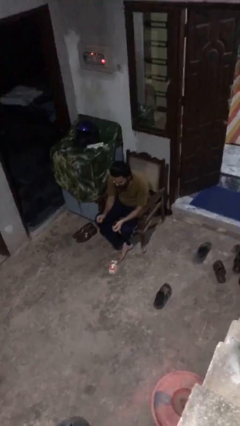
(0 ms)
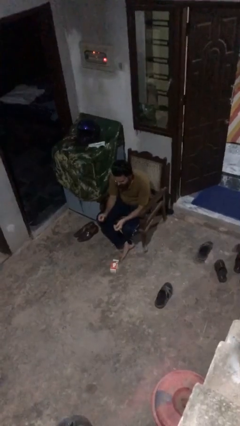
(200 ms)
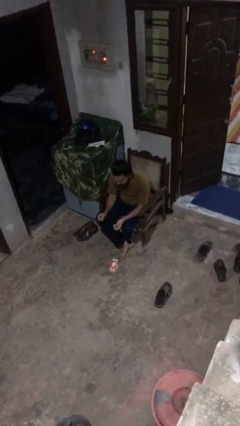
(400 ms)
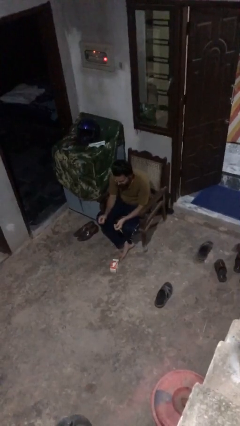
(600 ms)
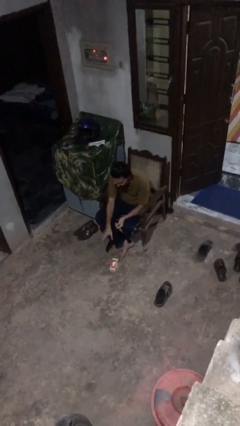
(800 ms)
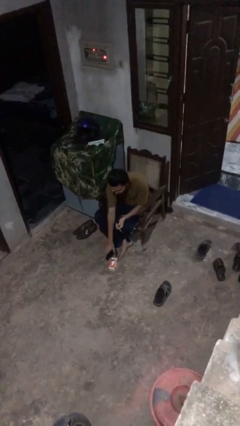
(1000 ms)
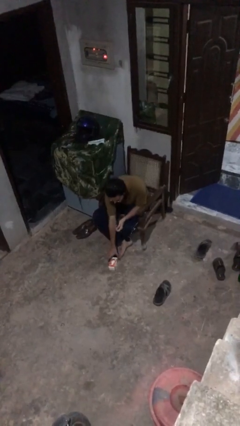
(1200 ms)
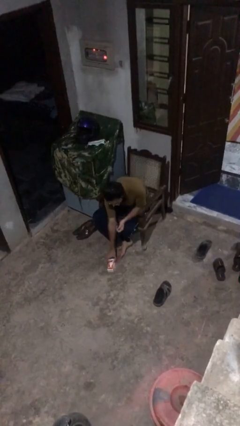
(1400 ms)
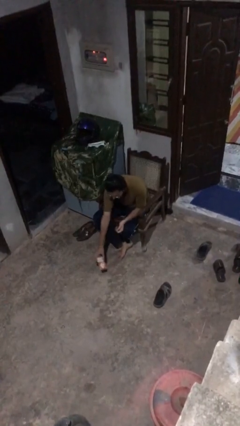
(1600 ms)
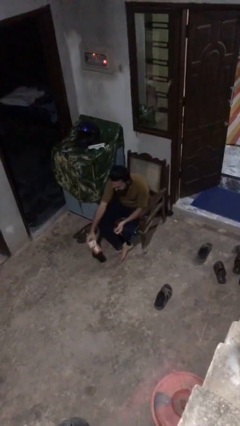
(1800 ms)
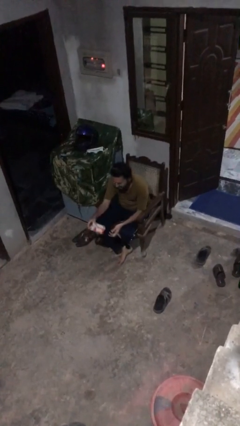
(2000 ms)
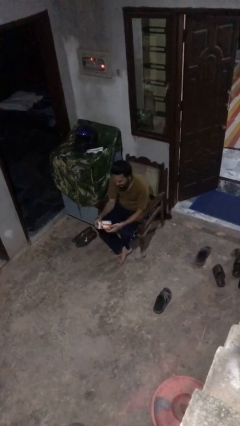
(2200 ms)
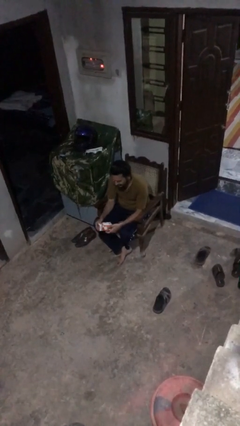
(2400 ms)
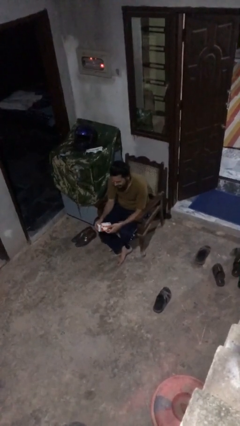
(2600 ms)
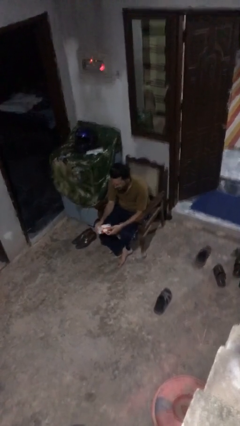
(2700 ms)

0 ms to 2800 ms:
person picks up object from floor

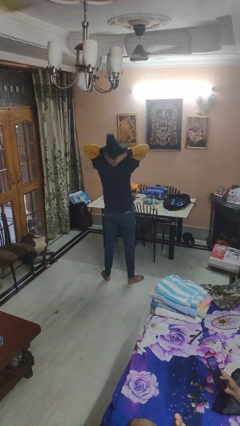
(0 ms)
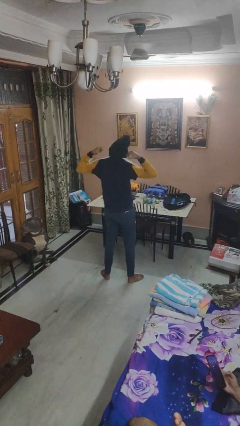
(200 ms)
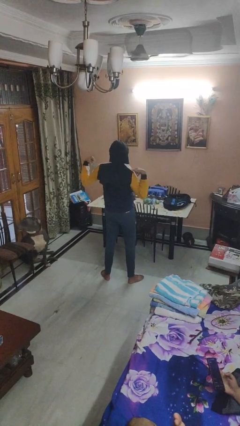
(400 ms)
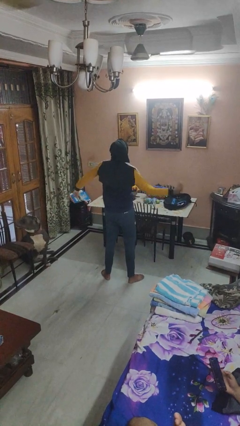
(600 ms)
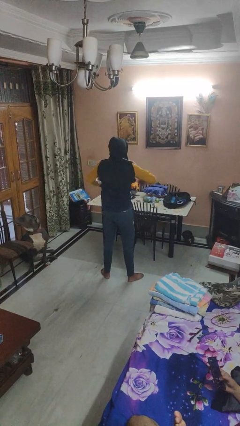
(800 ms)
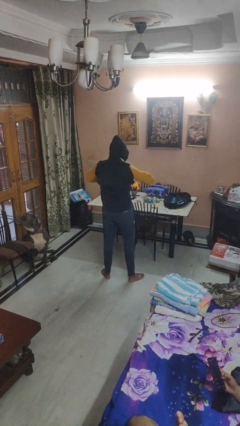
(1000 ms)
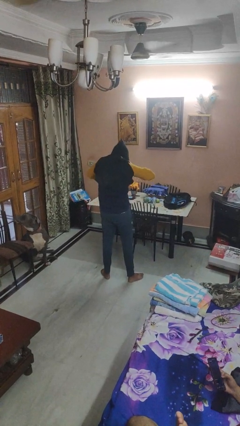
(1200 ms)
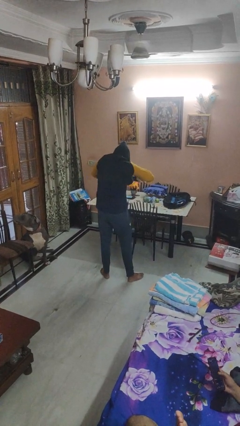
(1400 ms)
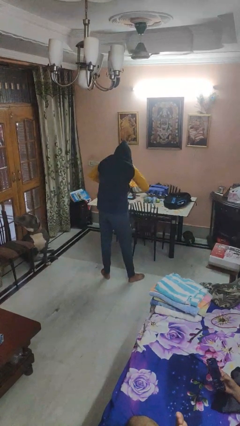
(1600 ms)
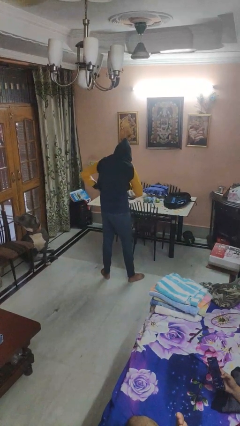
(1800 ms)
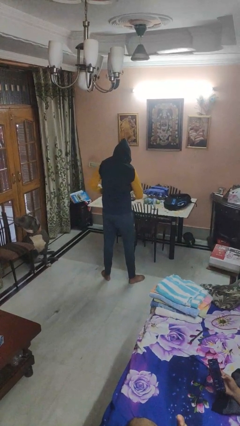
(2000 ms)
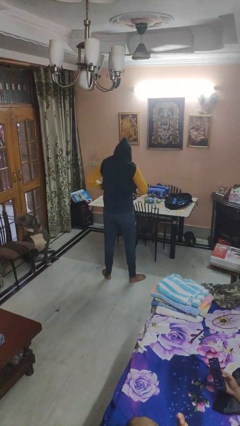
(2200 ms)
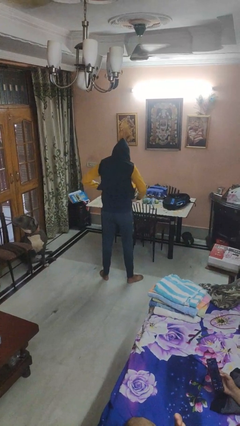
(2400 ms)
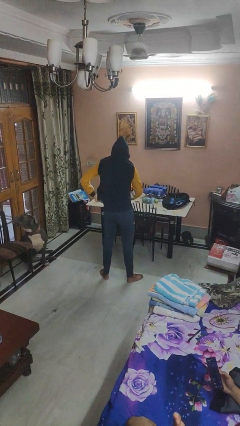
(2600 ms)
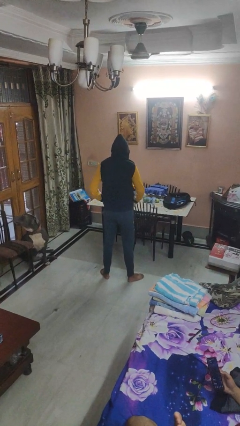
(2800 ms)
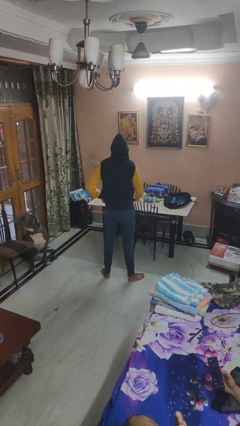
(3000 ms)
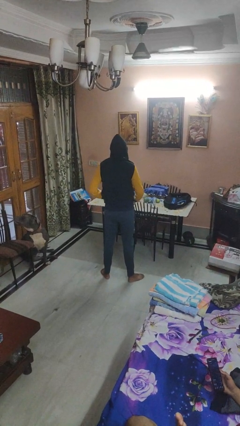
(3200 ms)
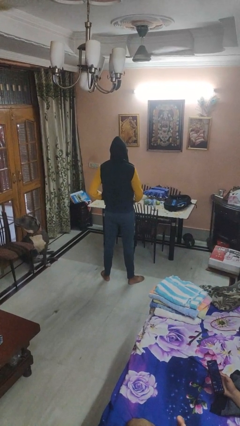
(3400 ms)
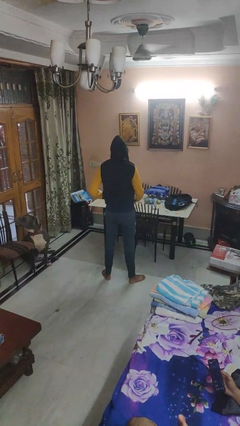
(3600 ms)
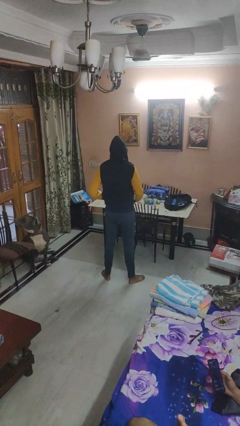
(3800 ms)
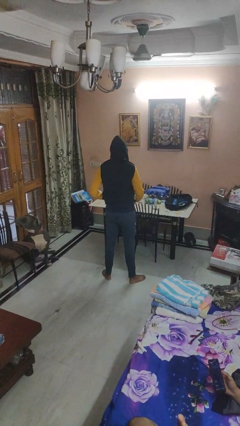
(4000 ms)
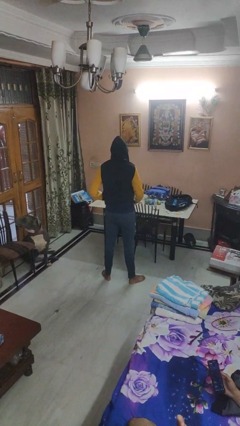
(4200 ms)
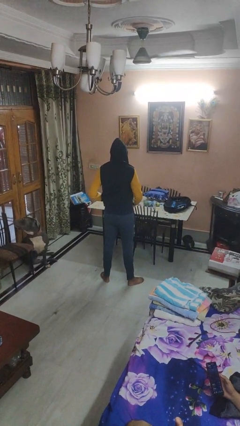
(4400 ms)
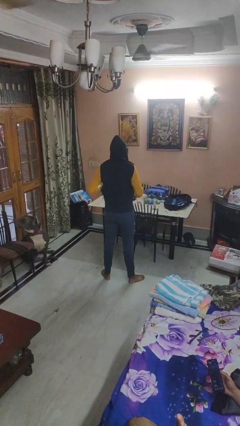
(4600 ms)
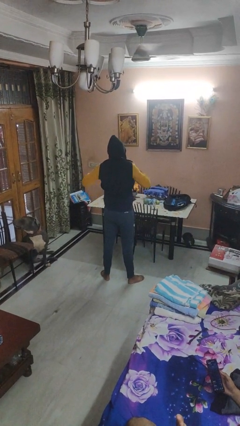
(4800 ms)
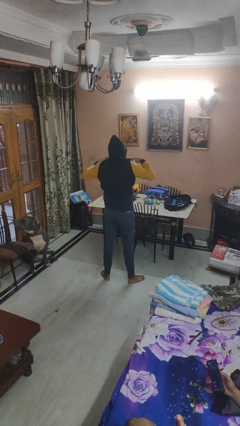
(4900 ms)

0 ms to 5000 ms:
person puts on hoodie

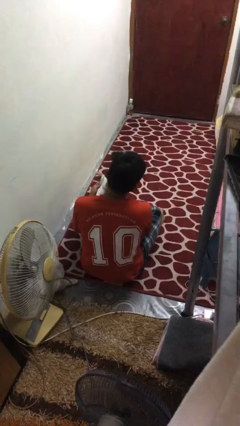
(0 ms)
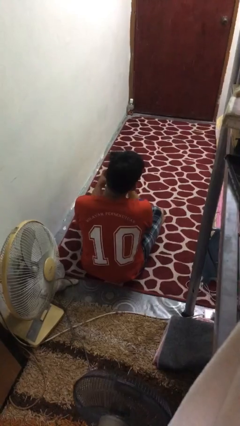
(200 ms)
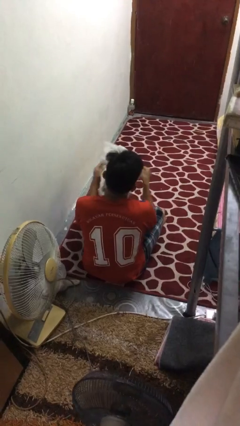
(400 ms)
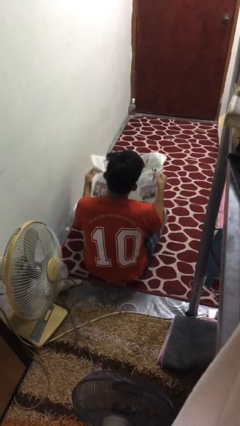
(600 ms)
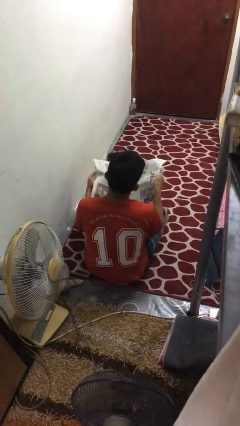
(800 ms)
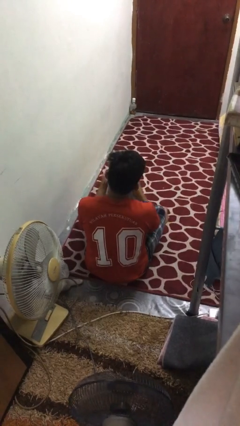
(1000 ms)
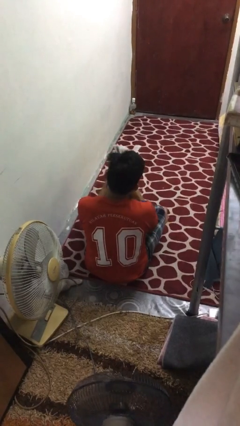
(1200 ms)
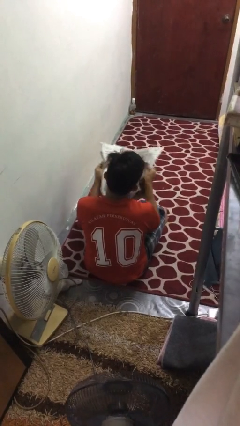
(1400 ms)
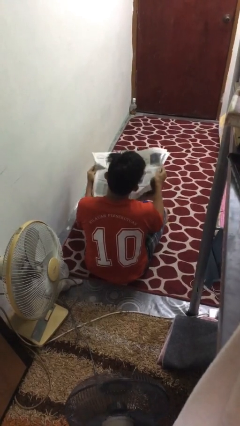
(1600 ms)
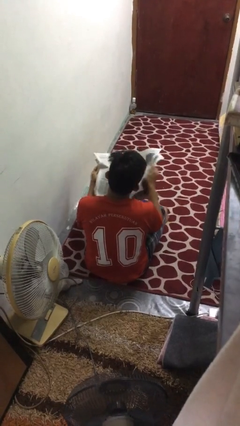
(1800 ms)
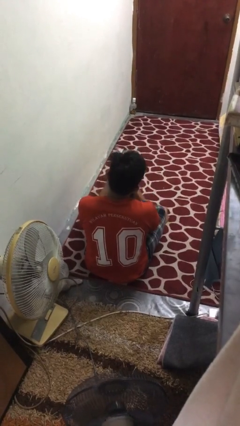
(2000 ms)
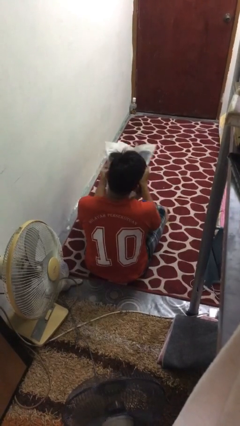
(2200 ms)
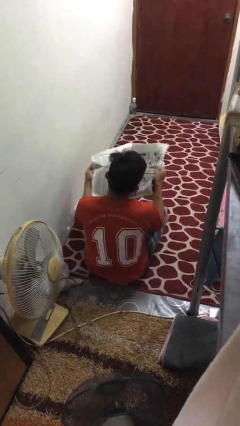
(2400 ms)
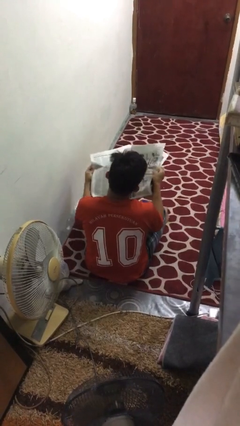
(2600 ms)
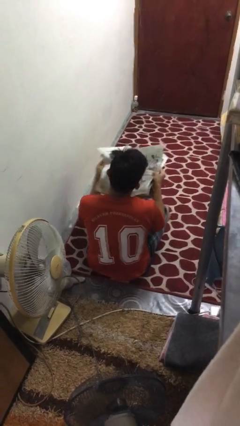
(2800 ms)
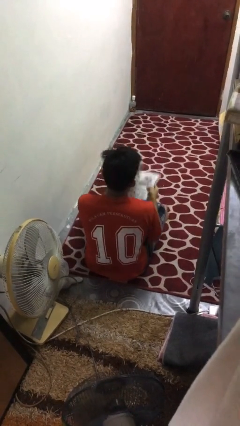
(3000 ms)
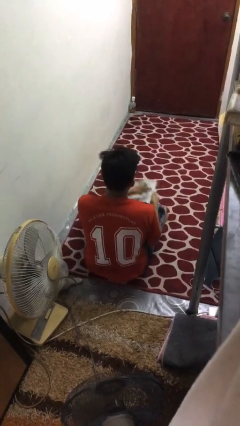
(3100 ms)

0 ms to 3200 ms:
person reads newspaper

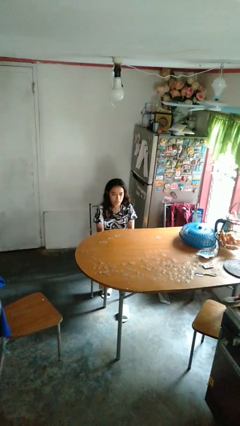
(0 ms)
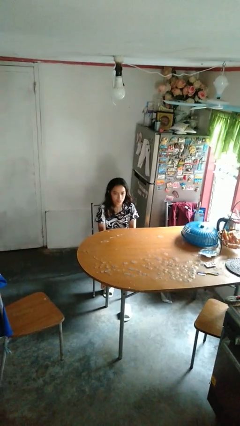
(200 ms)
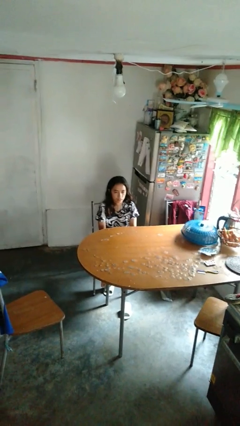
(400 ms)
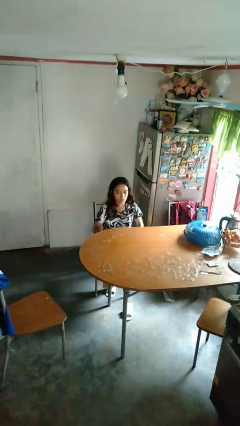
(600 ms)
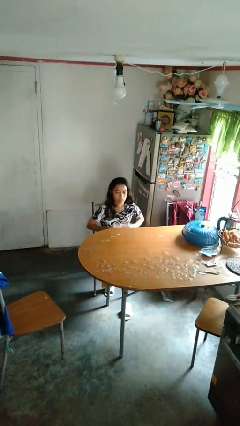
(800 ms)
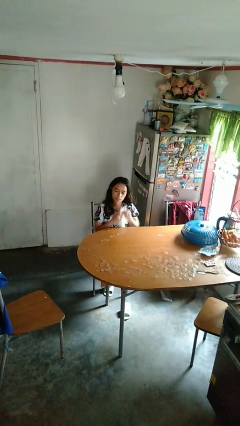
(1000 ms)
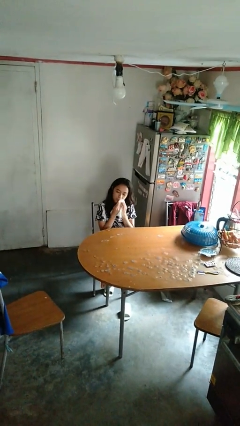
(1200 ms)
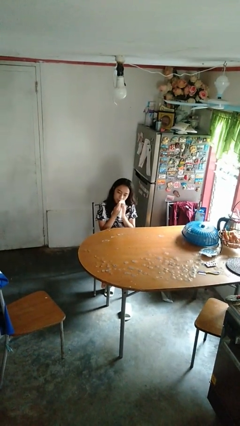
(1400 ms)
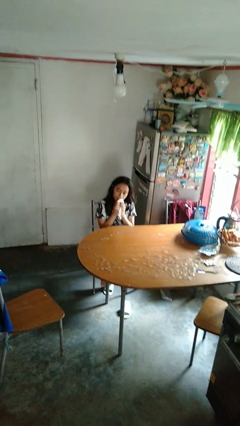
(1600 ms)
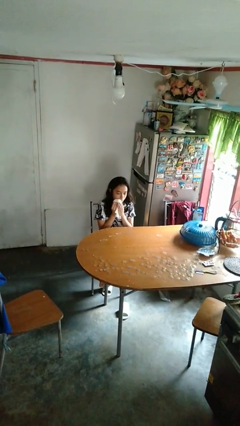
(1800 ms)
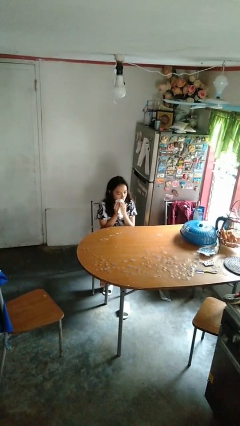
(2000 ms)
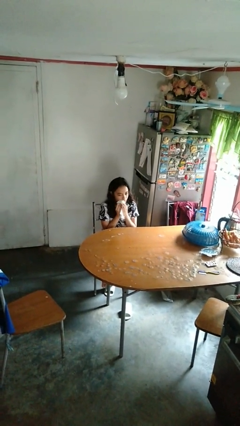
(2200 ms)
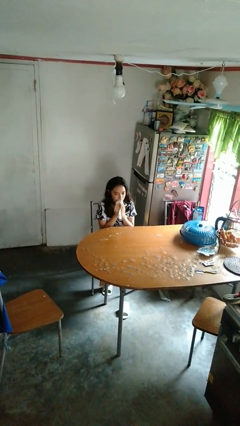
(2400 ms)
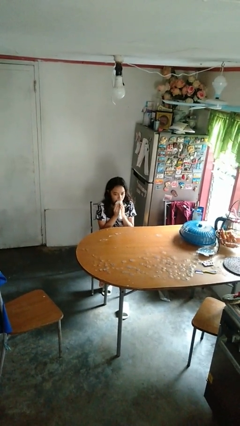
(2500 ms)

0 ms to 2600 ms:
person wipes mouth with napkin

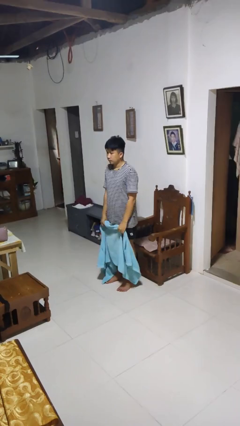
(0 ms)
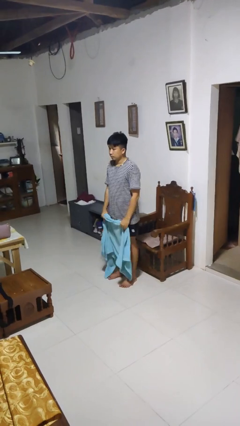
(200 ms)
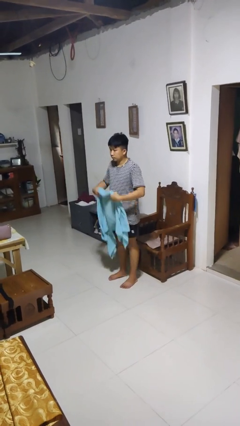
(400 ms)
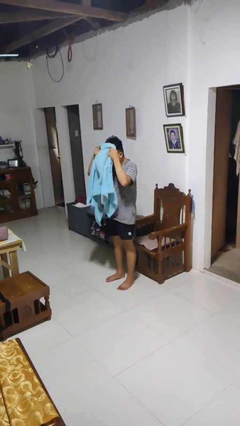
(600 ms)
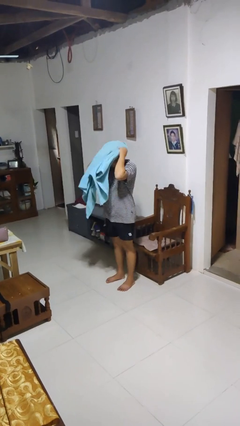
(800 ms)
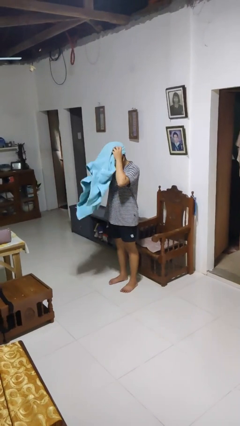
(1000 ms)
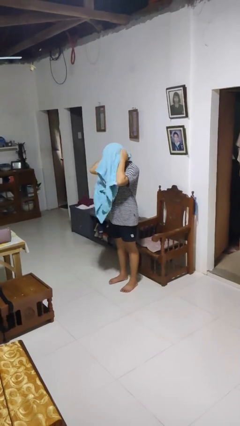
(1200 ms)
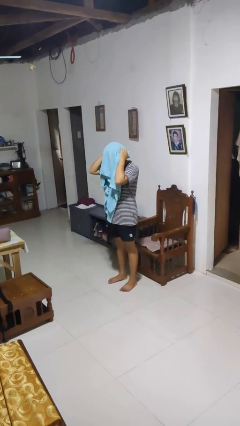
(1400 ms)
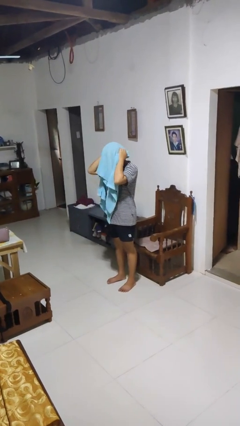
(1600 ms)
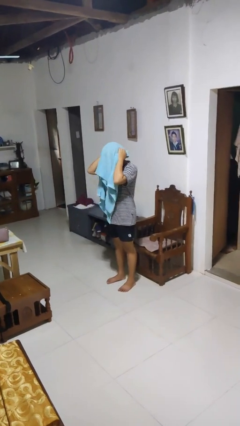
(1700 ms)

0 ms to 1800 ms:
person dries hair with towel

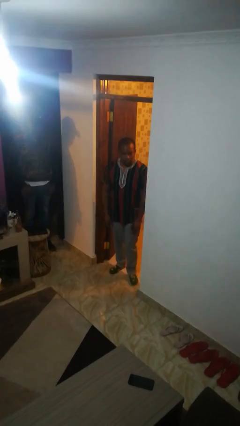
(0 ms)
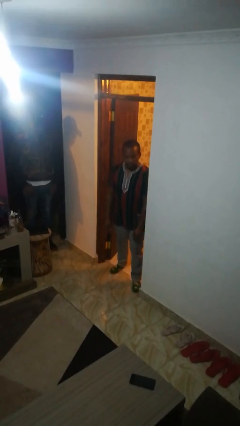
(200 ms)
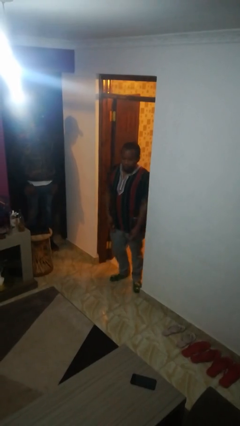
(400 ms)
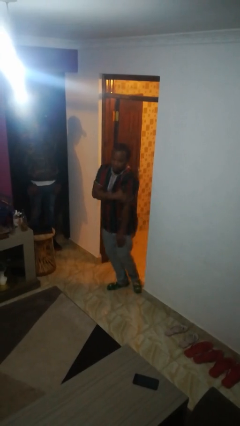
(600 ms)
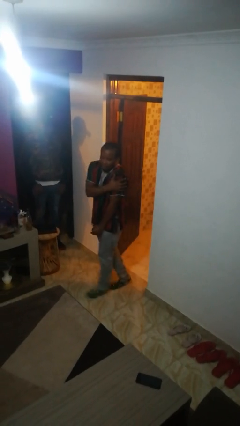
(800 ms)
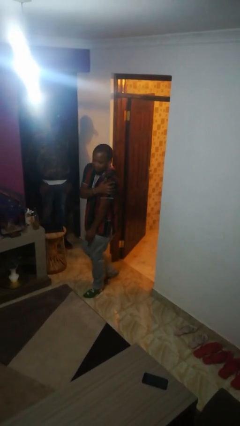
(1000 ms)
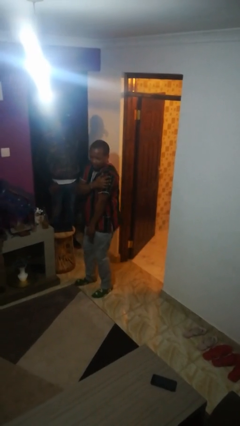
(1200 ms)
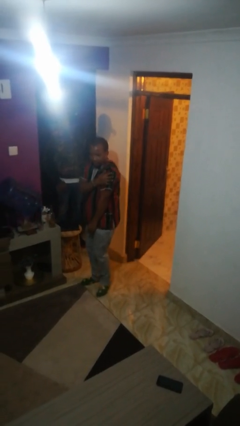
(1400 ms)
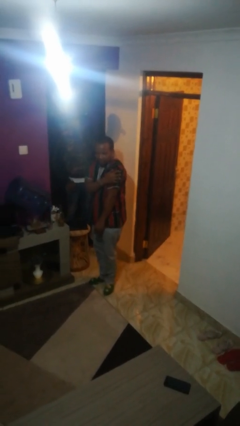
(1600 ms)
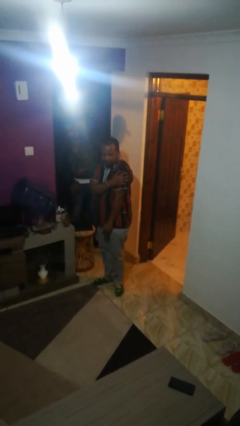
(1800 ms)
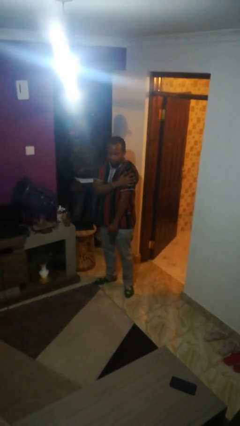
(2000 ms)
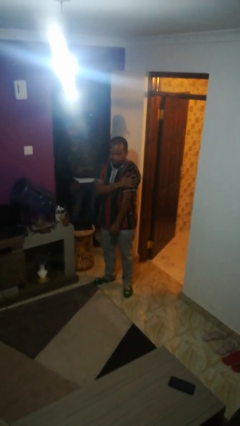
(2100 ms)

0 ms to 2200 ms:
person bumps into wall
